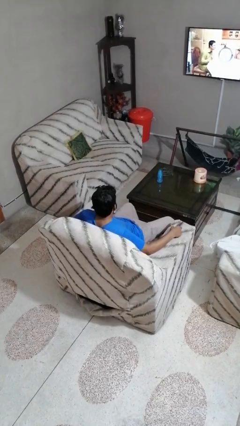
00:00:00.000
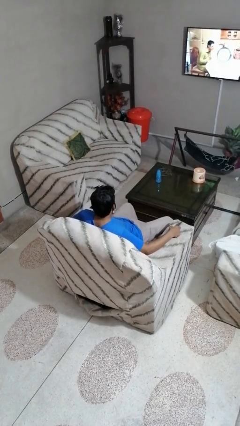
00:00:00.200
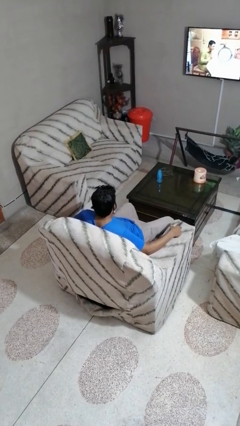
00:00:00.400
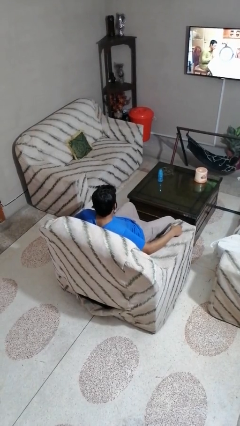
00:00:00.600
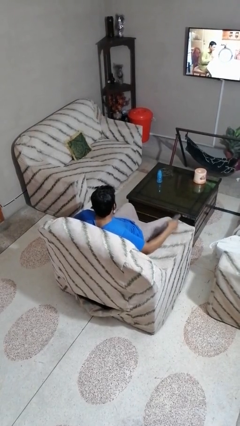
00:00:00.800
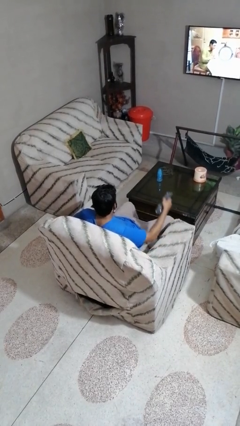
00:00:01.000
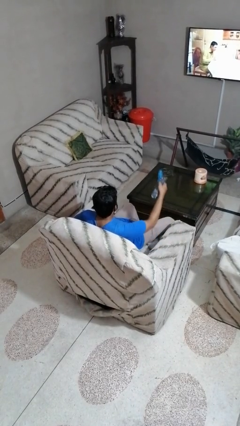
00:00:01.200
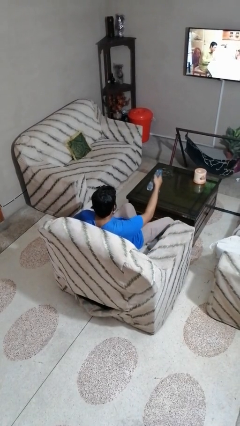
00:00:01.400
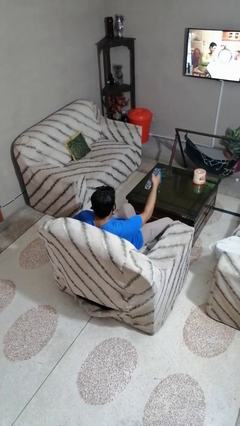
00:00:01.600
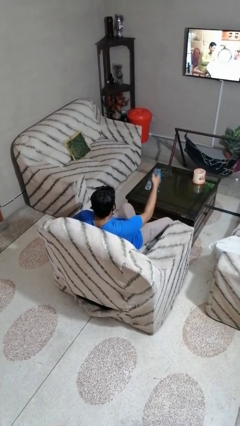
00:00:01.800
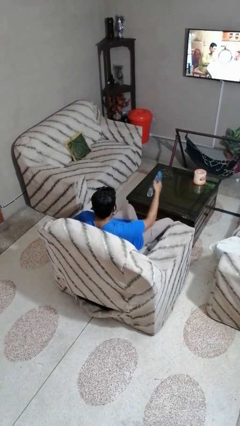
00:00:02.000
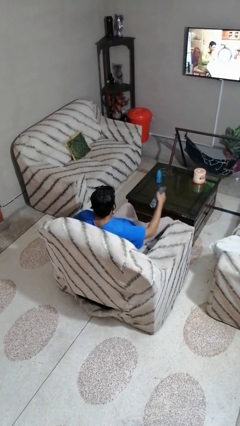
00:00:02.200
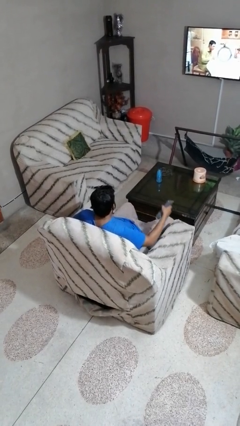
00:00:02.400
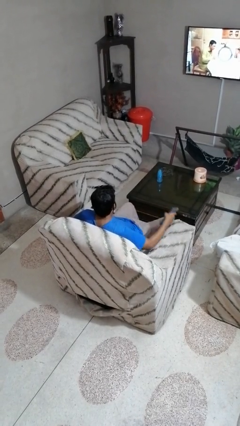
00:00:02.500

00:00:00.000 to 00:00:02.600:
person uses television remote

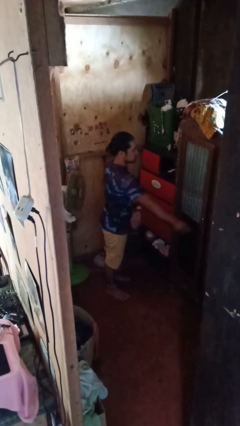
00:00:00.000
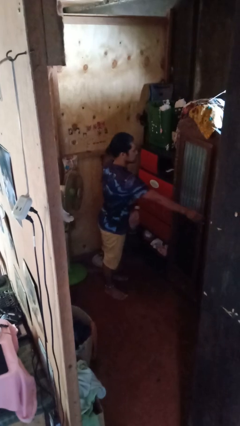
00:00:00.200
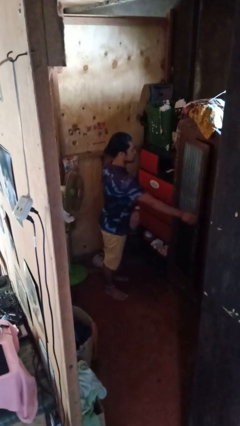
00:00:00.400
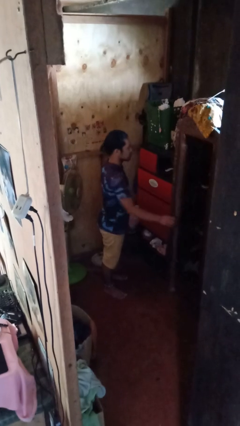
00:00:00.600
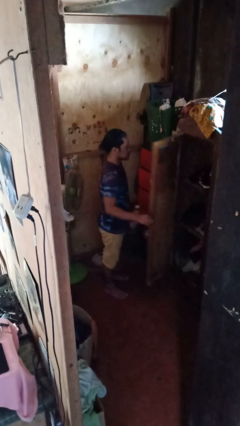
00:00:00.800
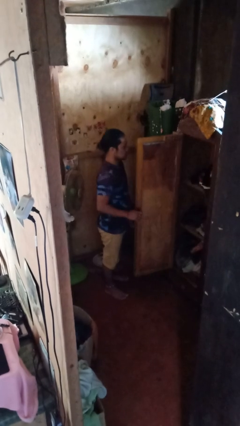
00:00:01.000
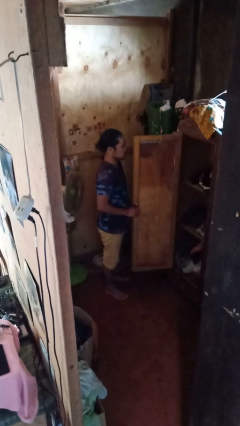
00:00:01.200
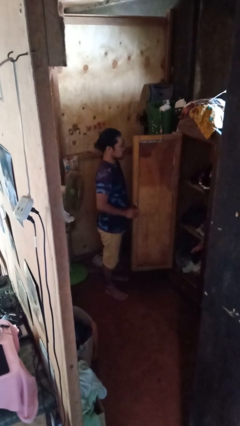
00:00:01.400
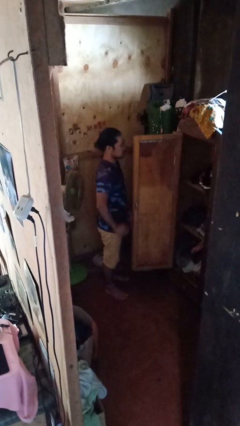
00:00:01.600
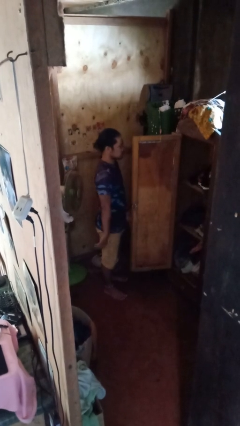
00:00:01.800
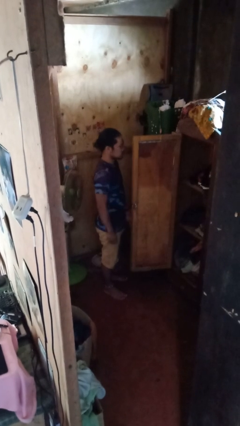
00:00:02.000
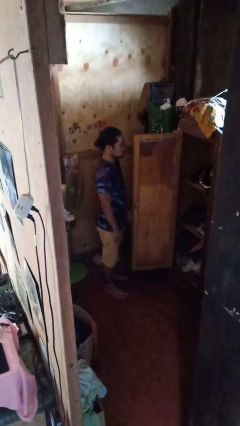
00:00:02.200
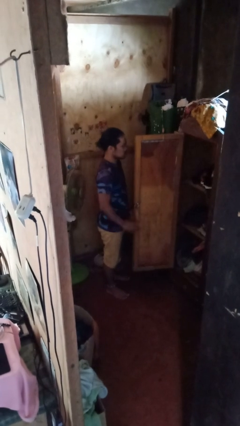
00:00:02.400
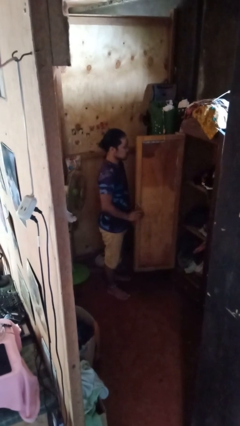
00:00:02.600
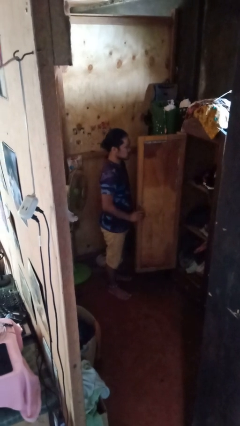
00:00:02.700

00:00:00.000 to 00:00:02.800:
person opens closet door

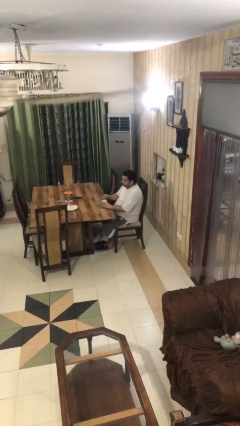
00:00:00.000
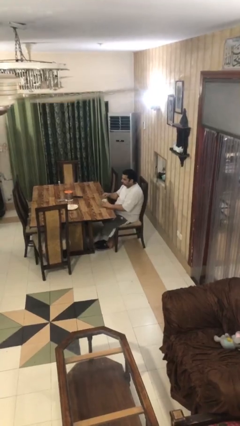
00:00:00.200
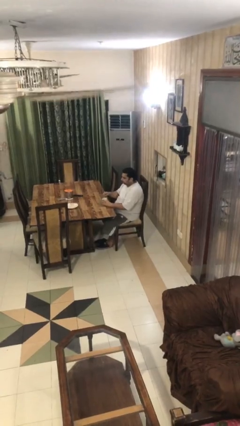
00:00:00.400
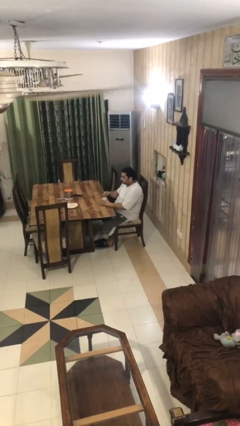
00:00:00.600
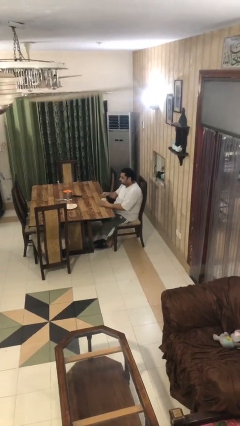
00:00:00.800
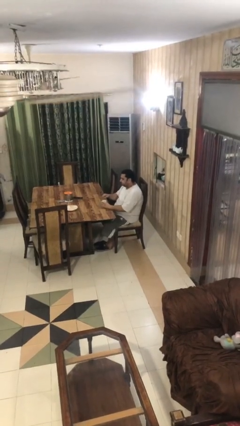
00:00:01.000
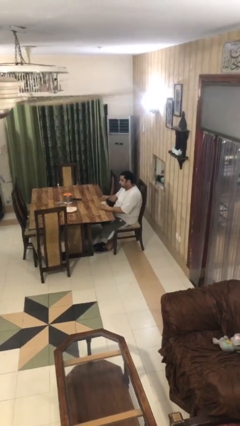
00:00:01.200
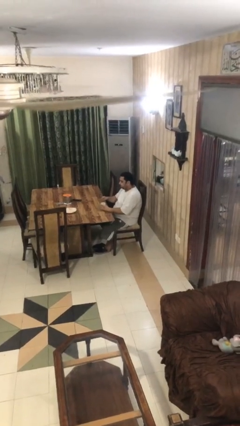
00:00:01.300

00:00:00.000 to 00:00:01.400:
person stirs mug

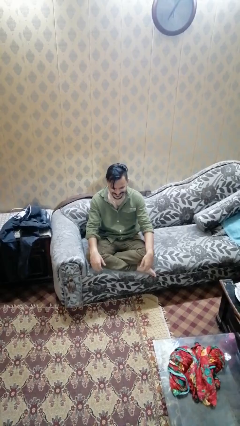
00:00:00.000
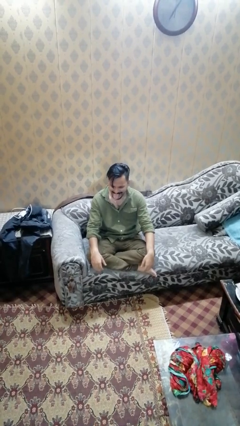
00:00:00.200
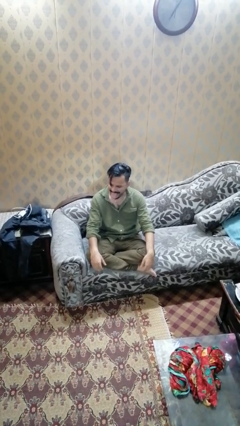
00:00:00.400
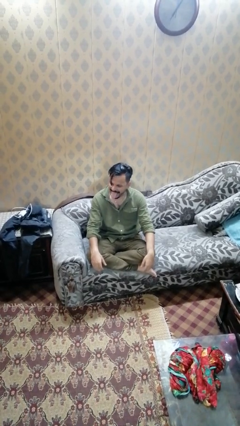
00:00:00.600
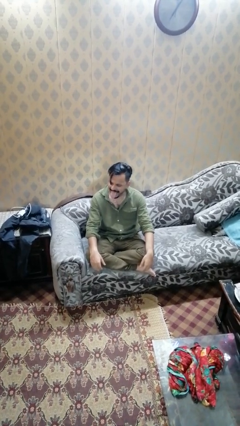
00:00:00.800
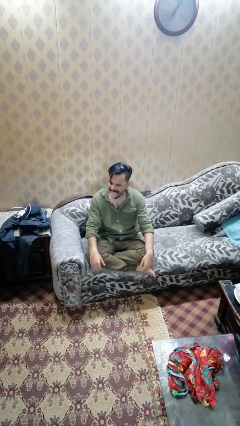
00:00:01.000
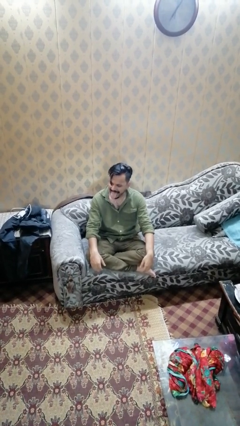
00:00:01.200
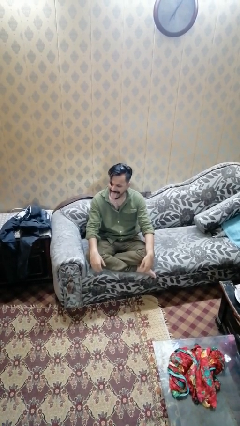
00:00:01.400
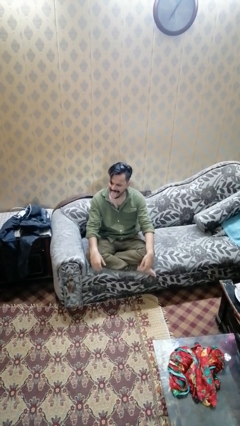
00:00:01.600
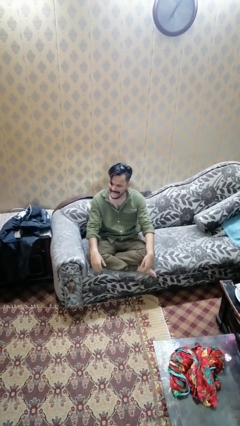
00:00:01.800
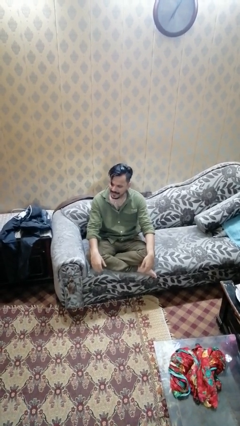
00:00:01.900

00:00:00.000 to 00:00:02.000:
person sticks out tongue

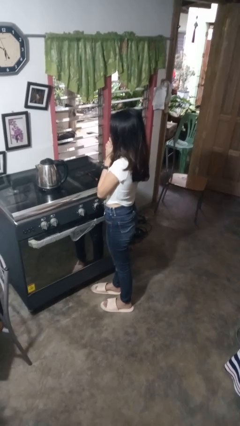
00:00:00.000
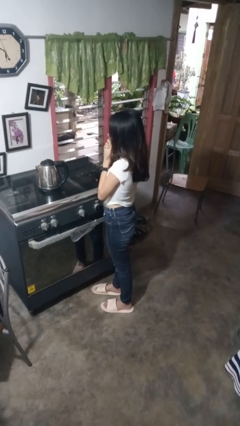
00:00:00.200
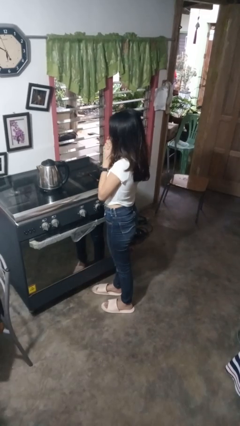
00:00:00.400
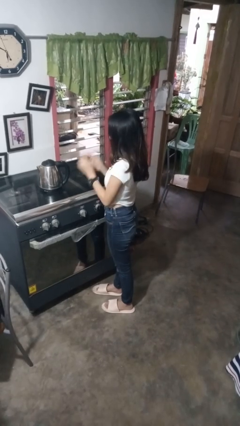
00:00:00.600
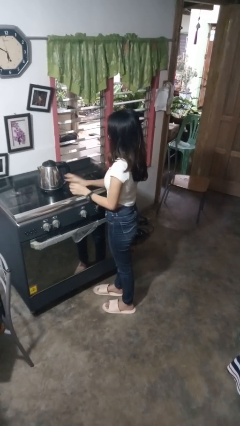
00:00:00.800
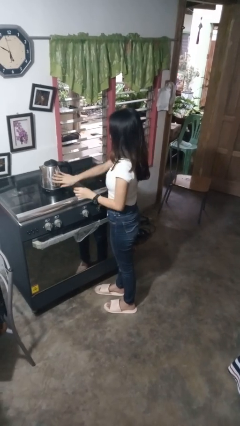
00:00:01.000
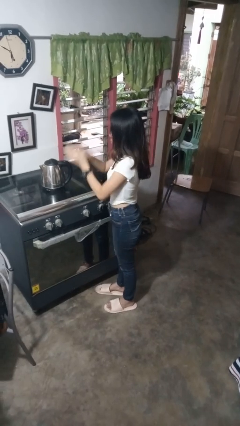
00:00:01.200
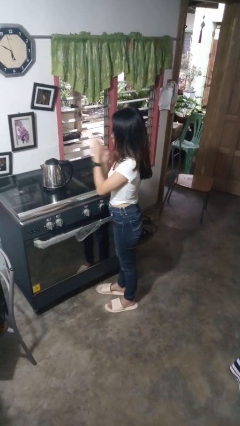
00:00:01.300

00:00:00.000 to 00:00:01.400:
person burns hand

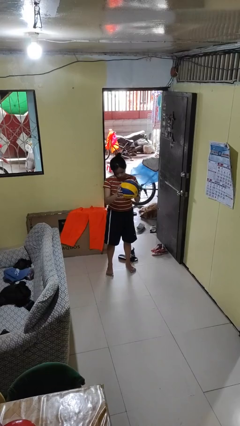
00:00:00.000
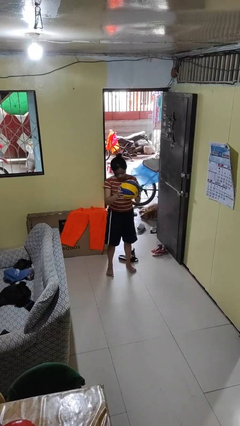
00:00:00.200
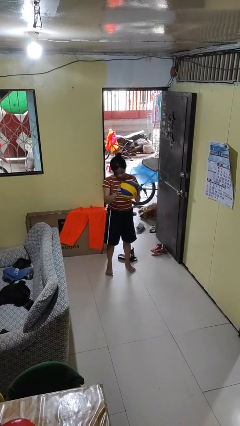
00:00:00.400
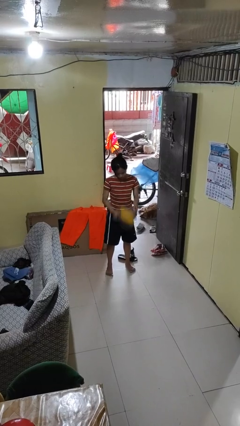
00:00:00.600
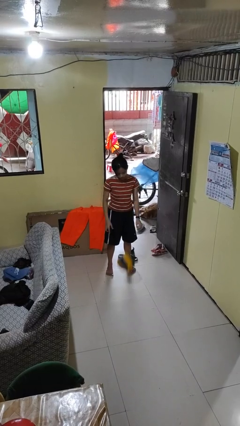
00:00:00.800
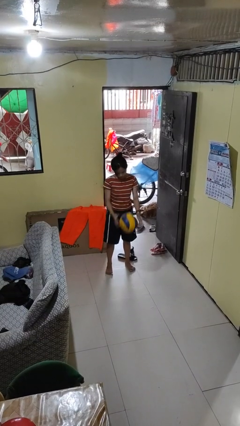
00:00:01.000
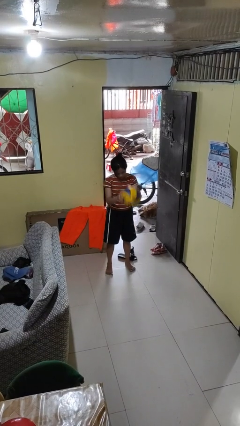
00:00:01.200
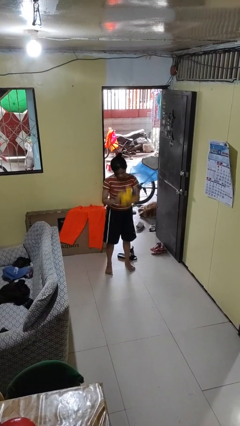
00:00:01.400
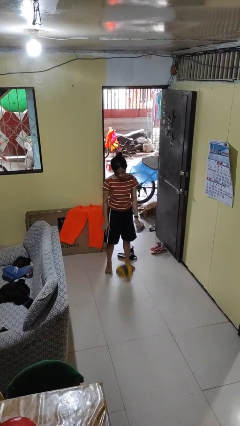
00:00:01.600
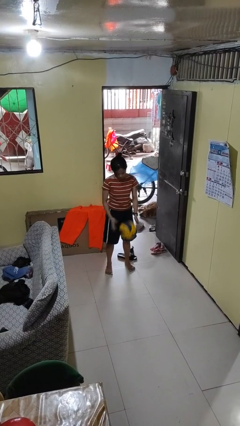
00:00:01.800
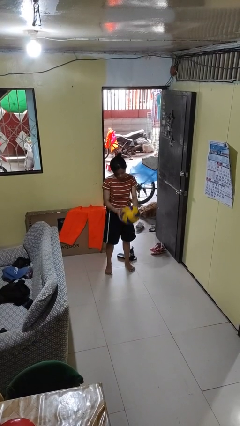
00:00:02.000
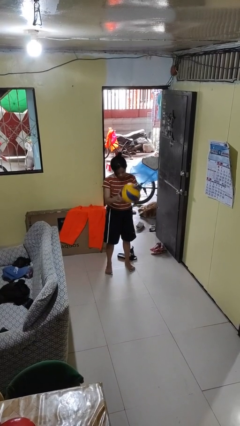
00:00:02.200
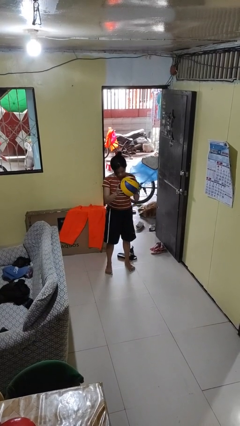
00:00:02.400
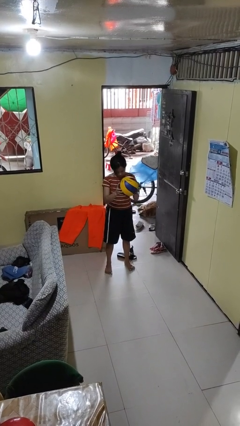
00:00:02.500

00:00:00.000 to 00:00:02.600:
person bounces ball on floor

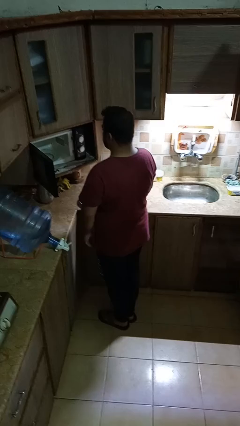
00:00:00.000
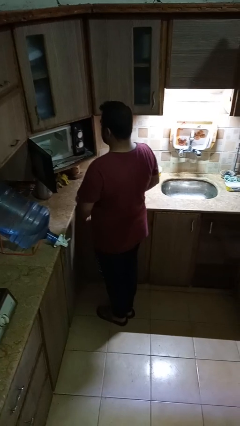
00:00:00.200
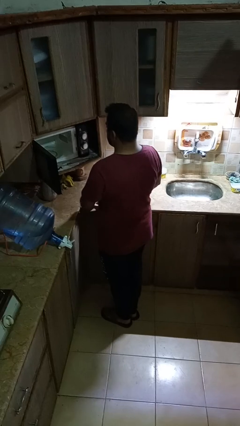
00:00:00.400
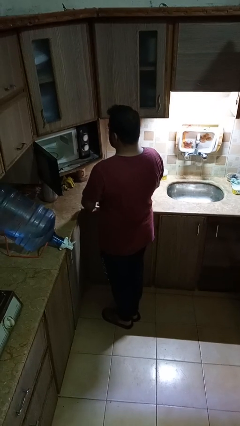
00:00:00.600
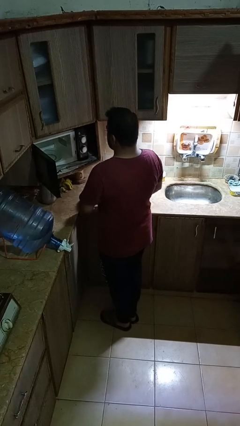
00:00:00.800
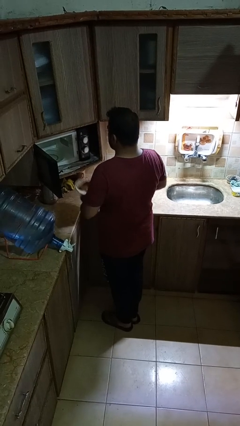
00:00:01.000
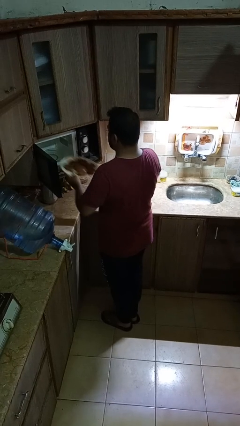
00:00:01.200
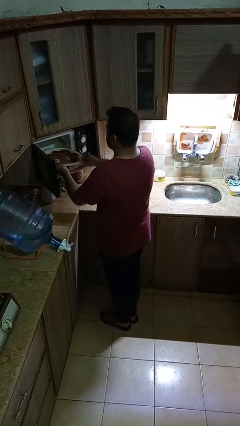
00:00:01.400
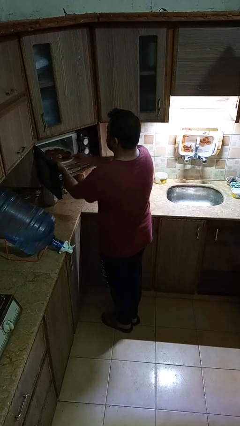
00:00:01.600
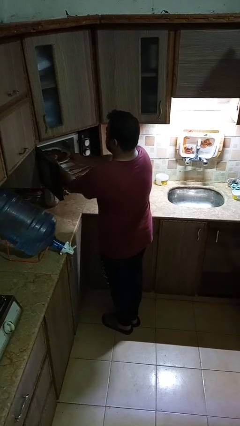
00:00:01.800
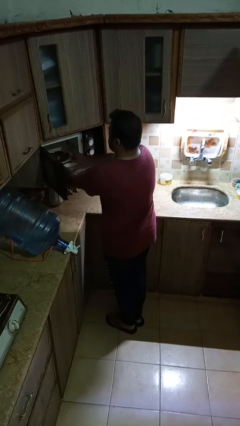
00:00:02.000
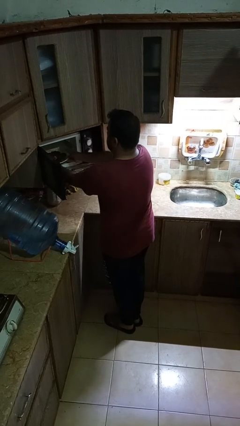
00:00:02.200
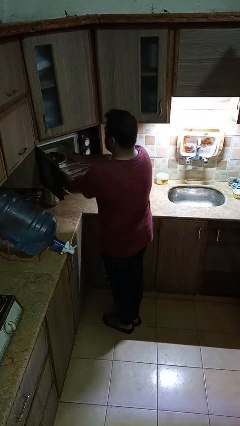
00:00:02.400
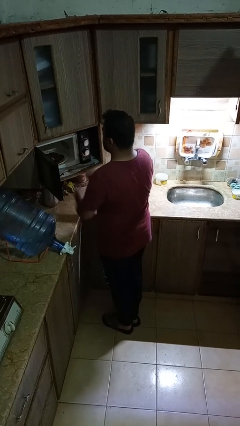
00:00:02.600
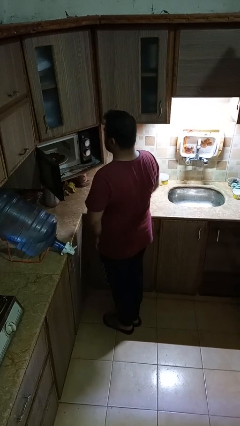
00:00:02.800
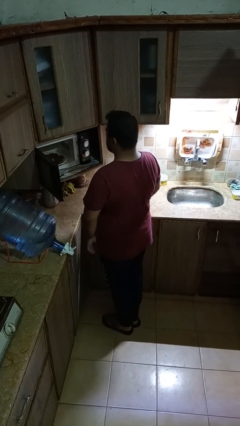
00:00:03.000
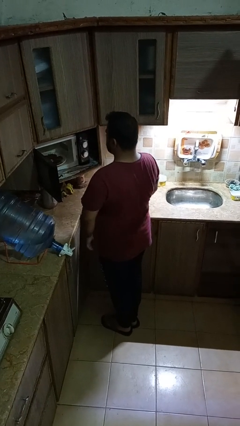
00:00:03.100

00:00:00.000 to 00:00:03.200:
person puts object into microwave

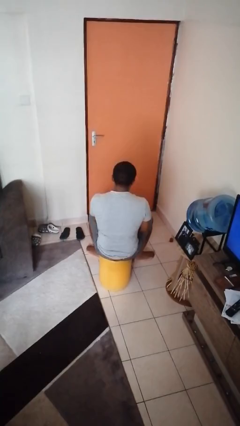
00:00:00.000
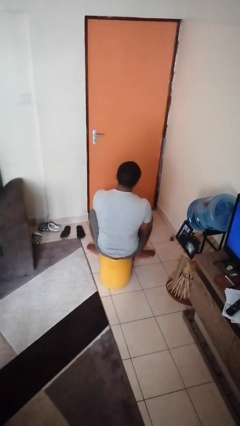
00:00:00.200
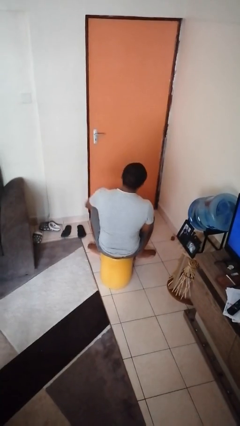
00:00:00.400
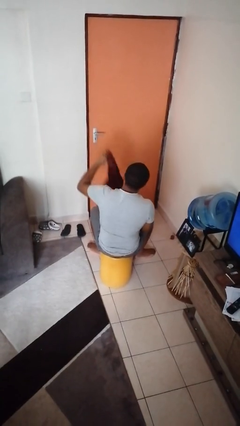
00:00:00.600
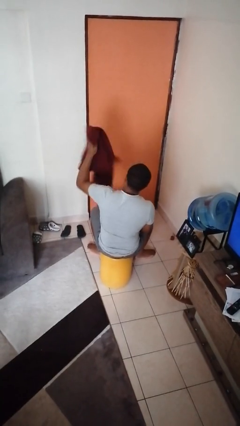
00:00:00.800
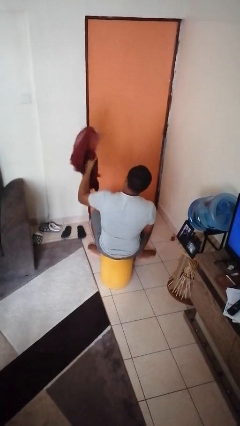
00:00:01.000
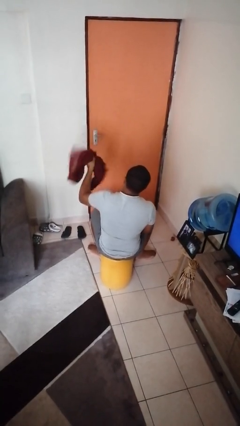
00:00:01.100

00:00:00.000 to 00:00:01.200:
person takes object from basket
